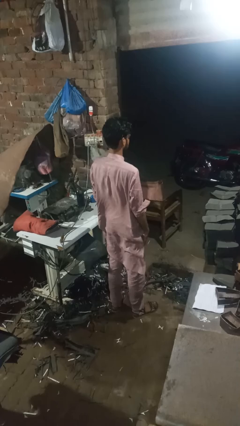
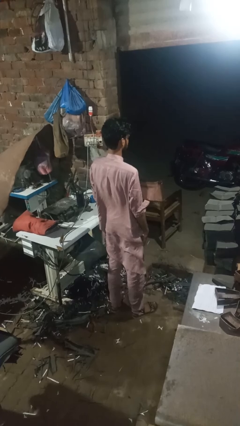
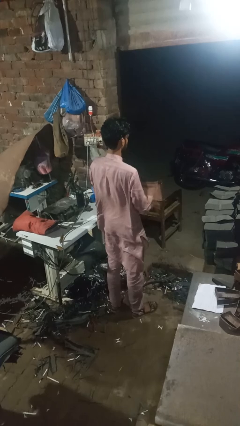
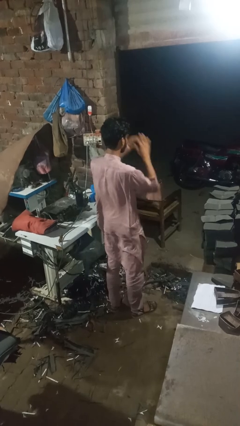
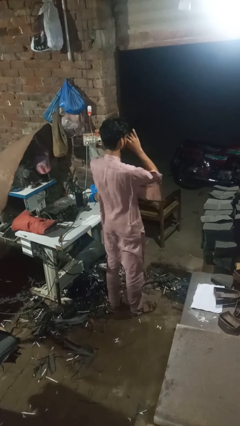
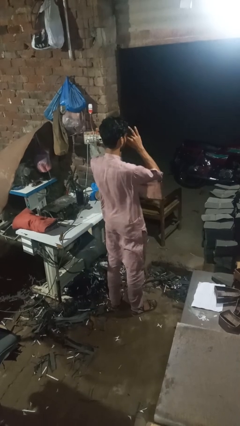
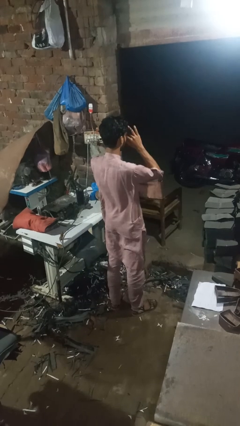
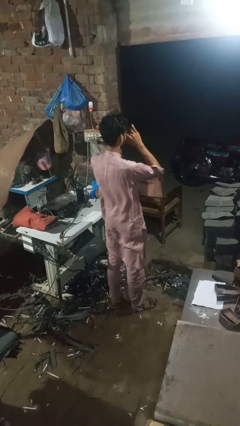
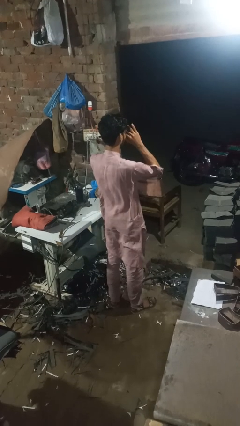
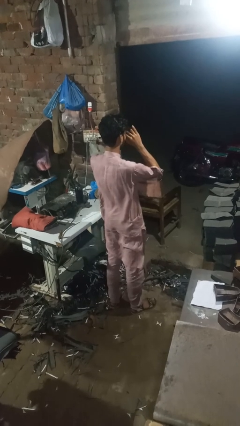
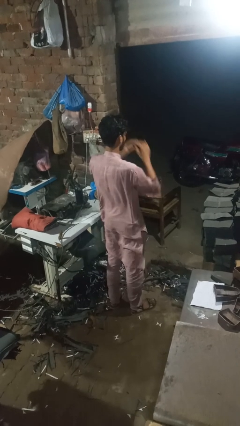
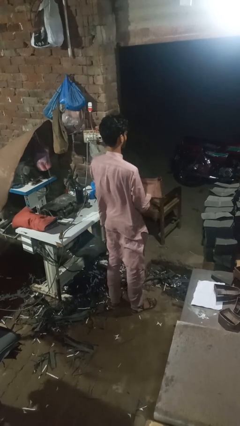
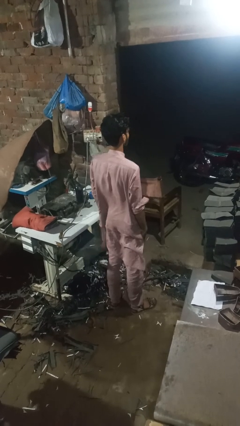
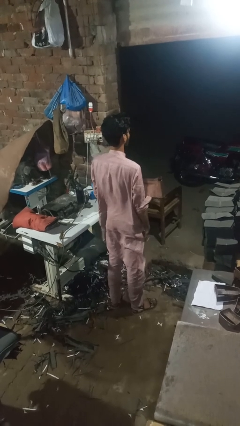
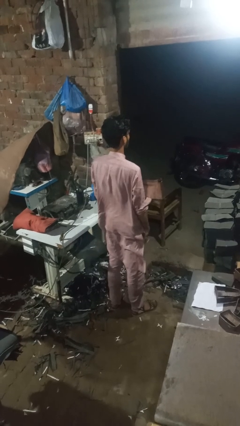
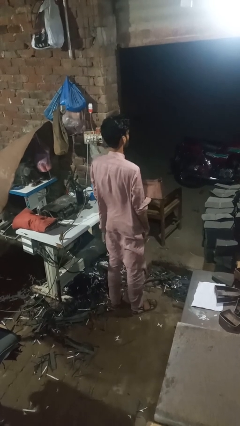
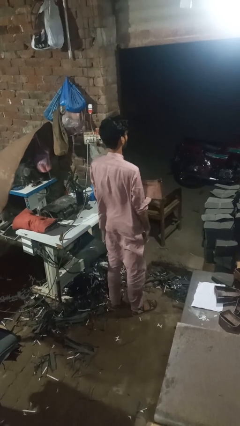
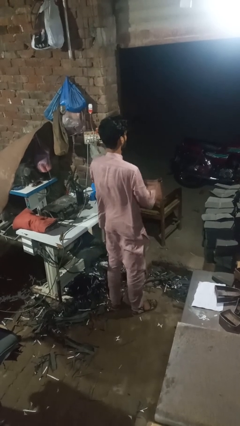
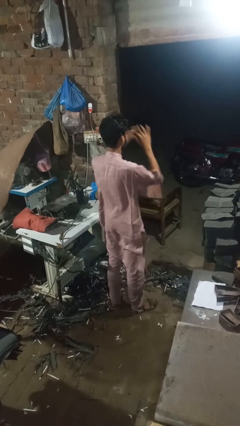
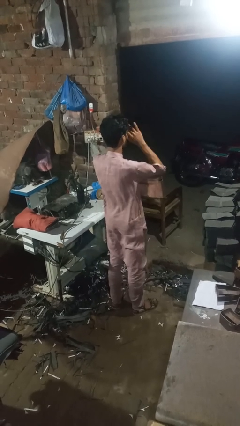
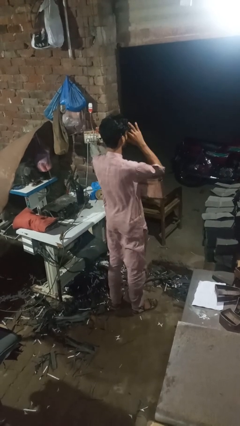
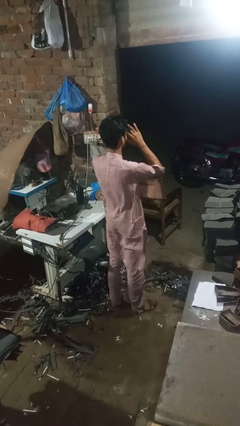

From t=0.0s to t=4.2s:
person rubs eyes

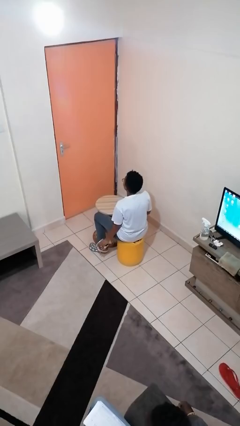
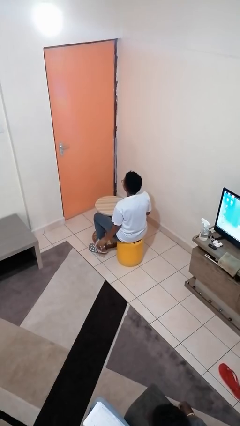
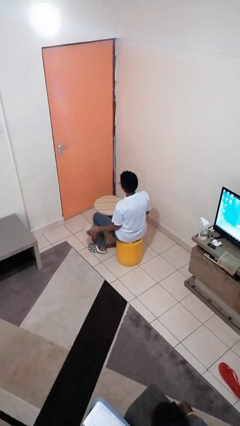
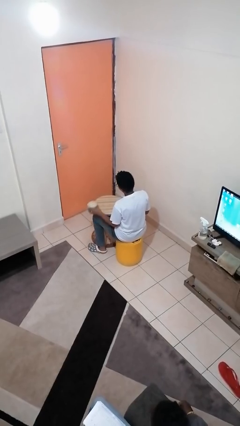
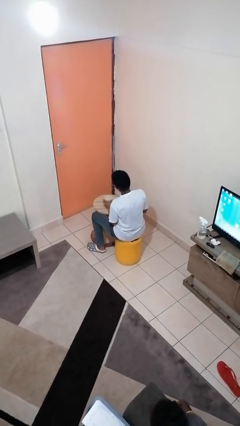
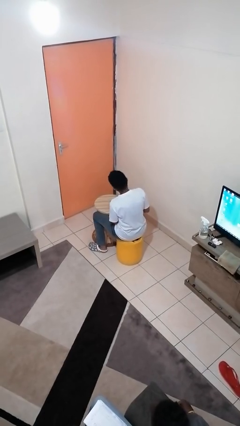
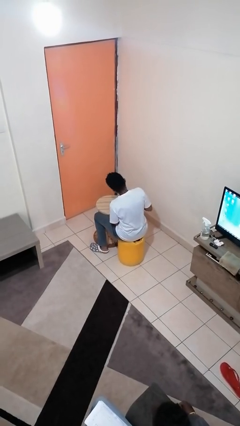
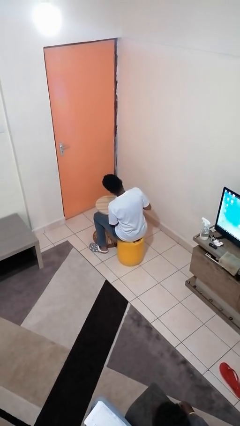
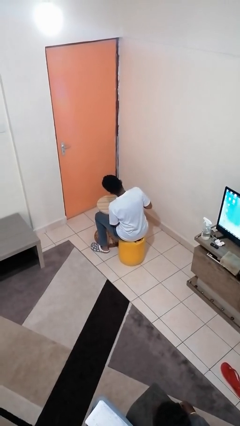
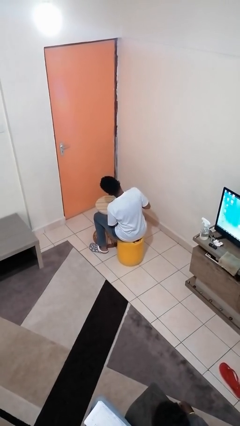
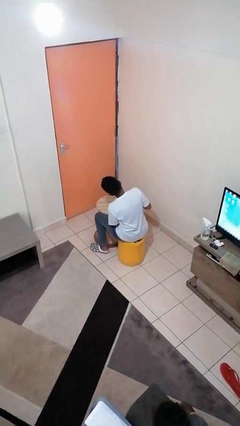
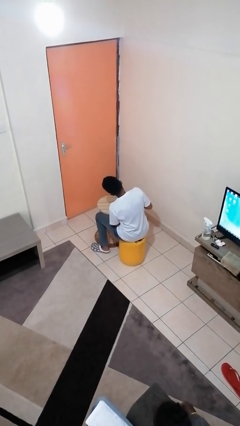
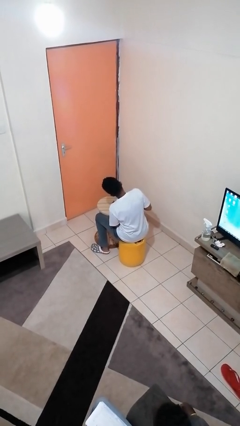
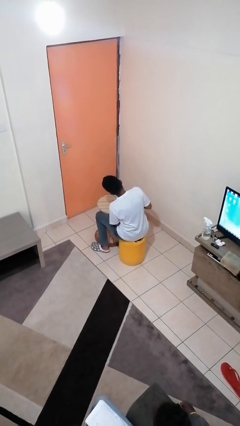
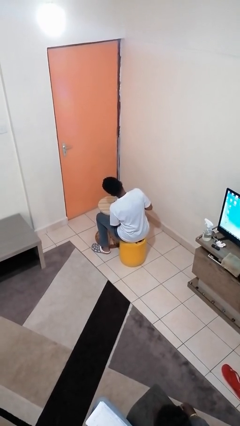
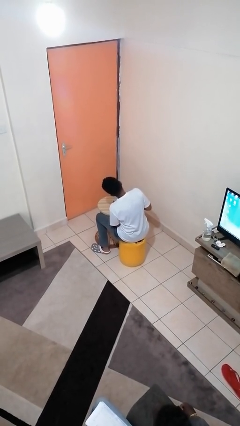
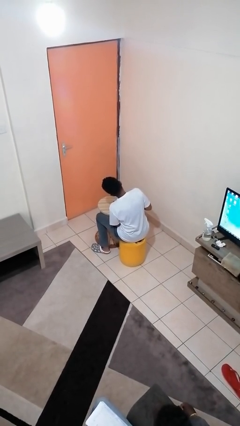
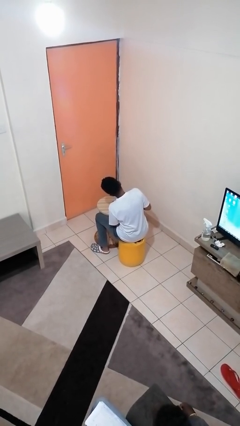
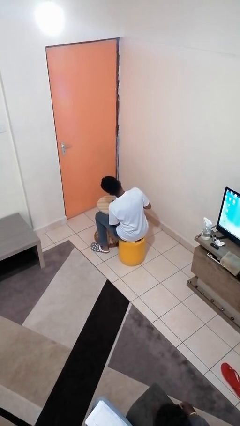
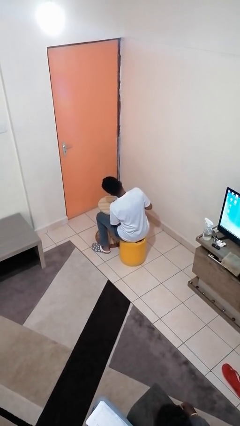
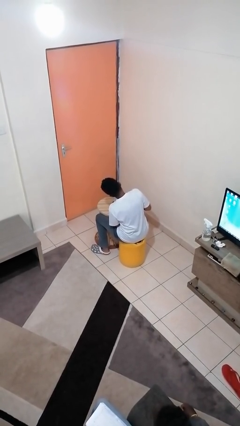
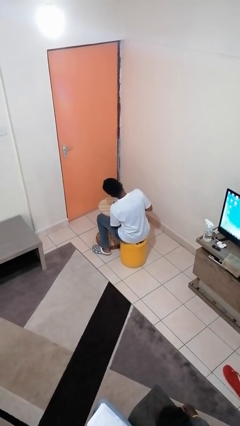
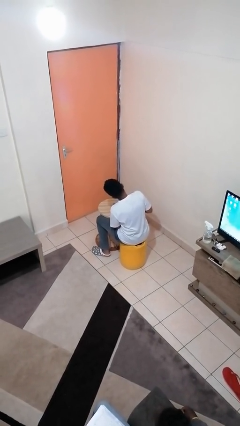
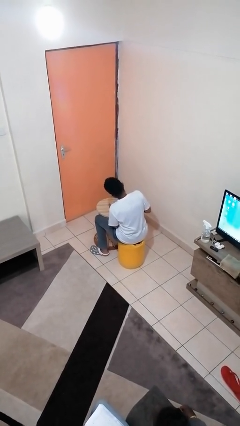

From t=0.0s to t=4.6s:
person opens can with can opener

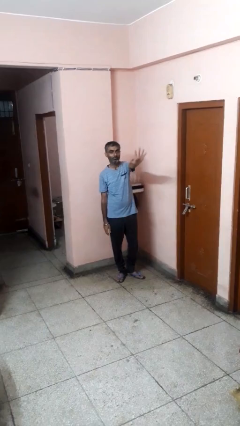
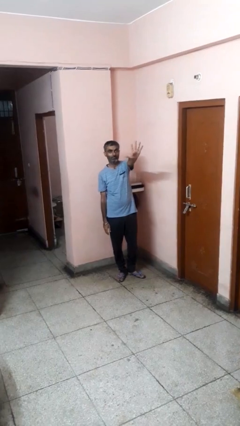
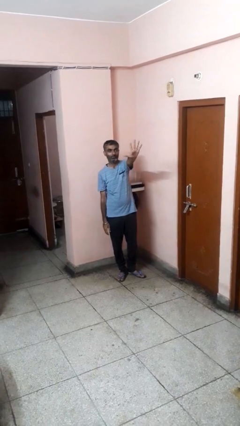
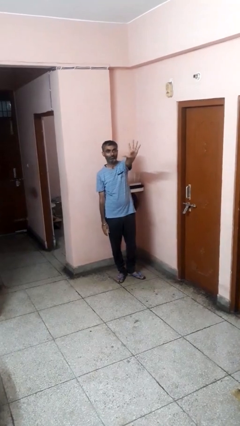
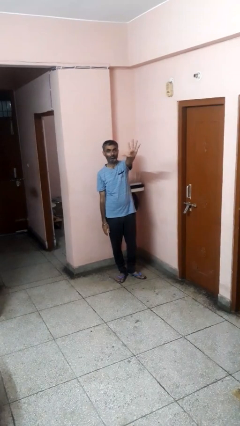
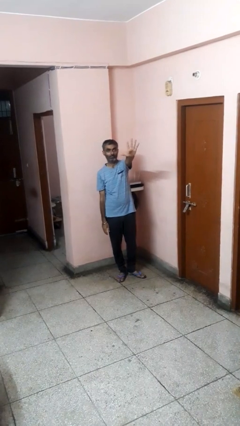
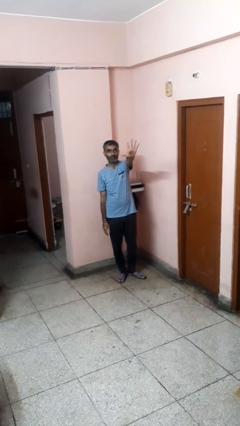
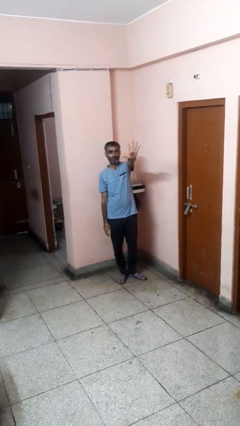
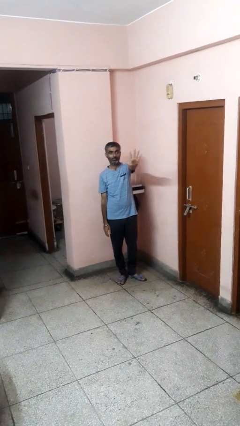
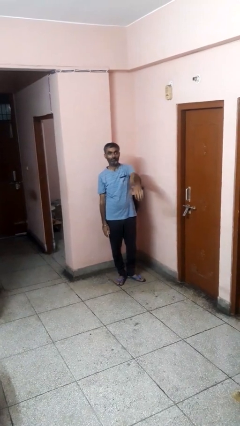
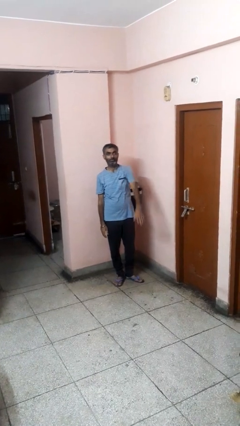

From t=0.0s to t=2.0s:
person gestures number five

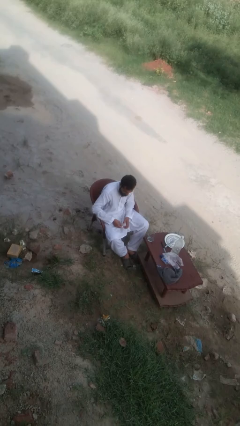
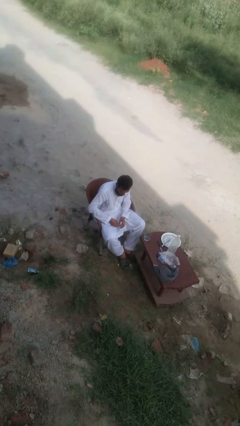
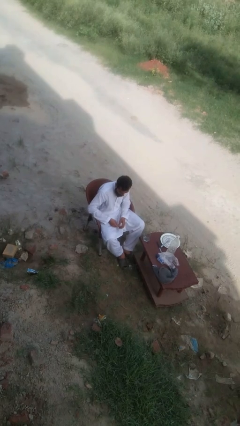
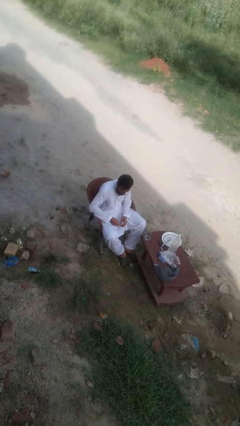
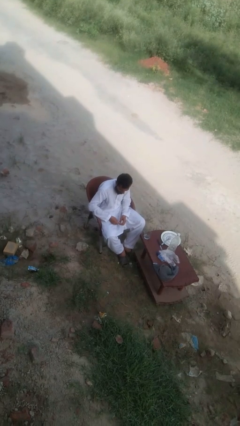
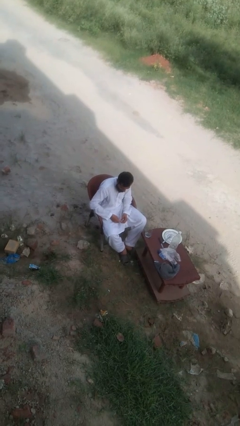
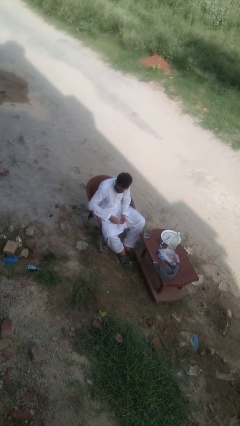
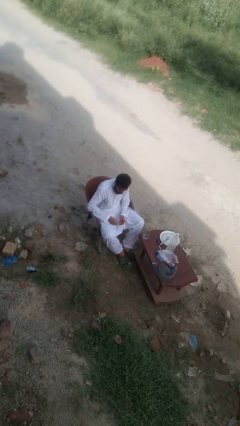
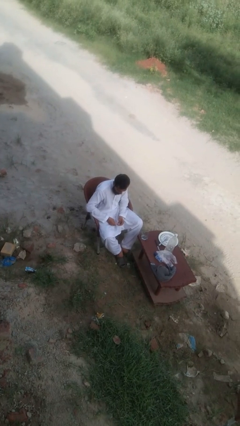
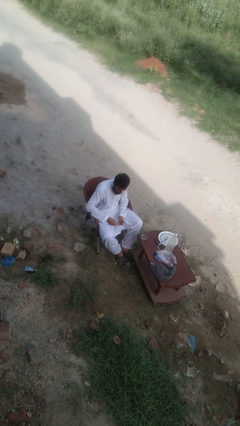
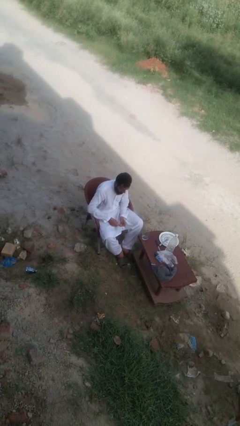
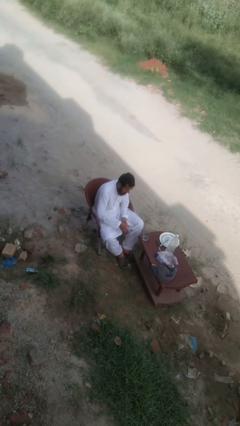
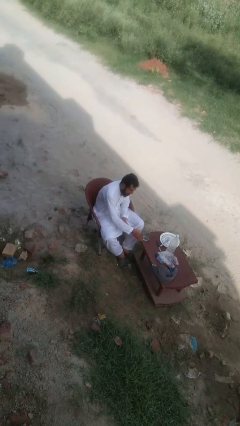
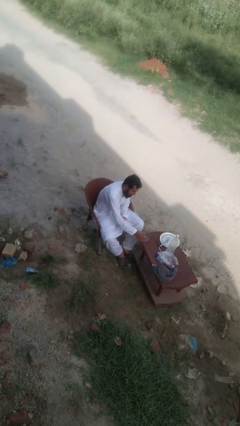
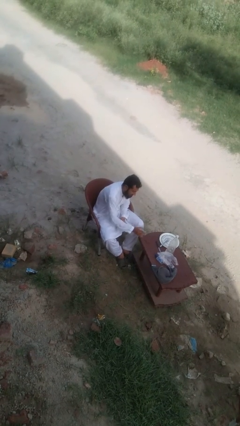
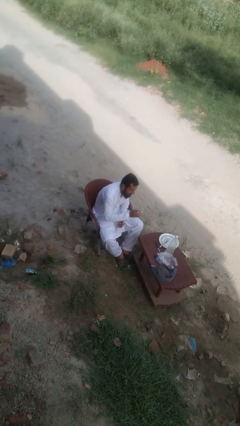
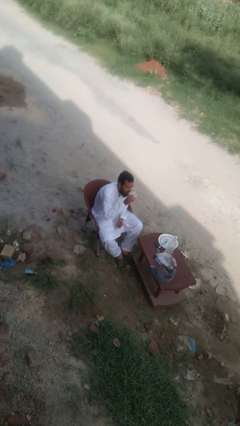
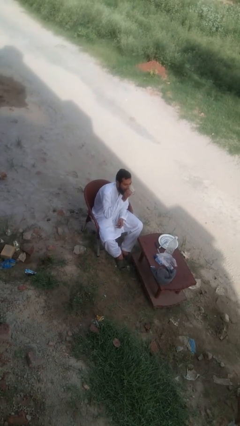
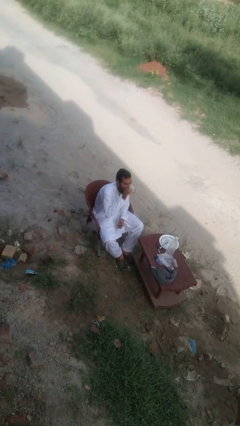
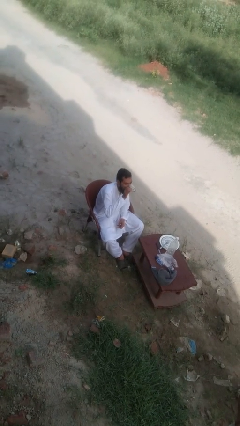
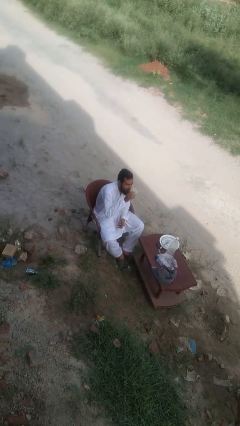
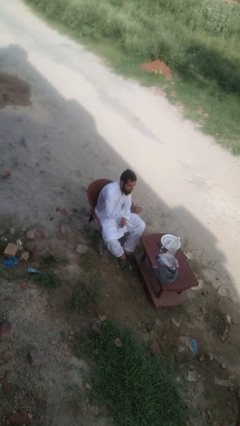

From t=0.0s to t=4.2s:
person drinks from cup

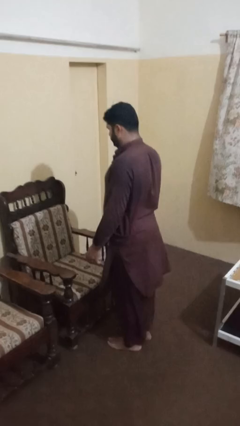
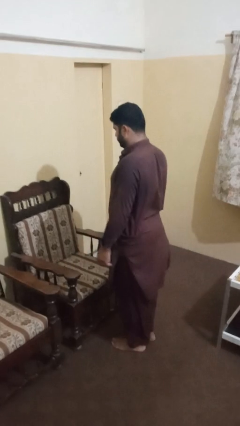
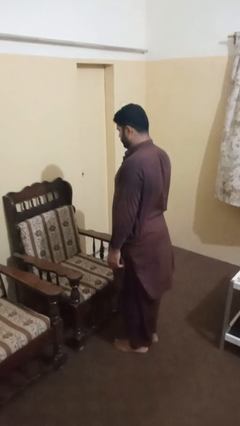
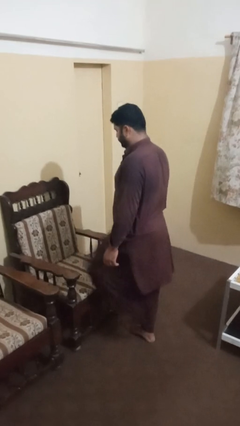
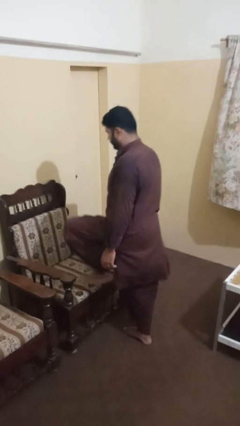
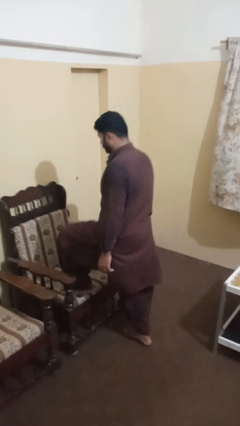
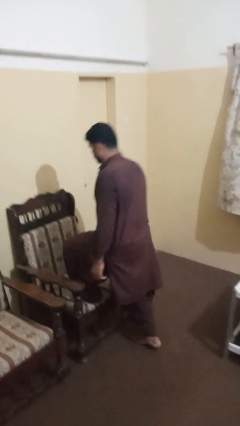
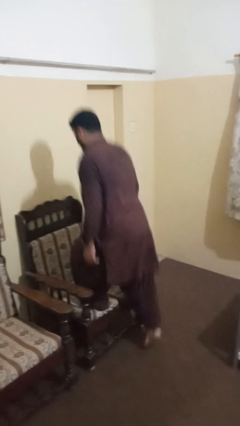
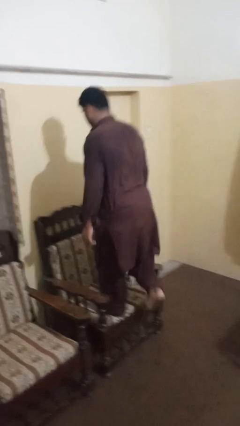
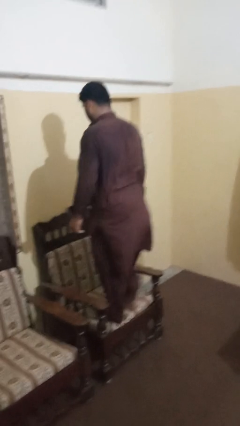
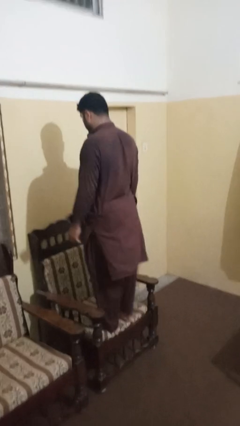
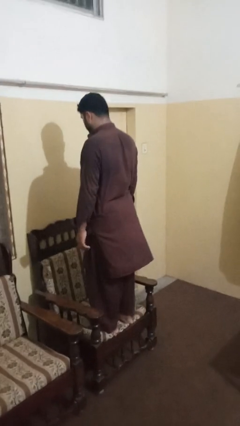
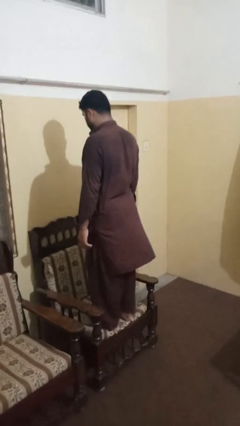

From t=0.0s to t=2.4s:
person climbs on chair
